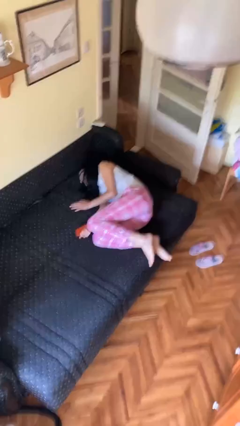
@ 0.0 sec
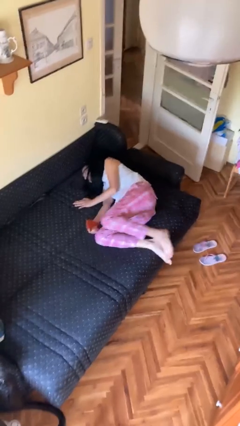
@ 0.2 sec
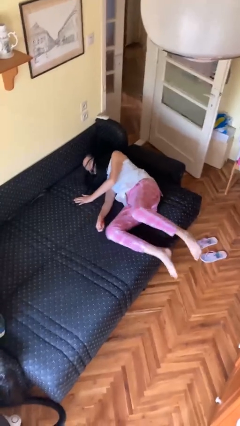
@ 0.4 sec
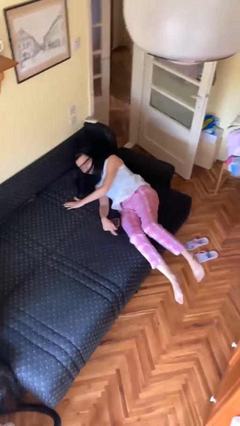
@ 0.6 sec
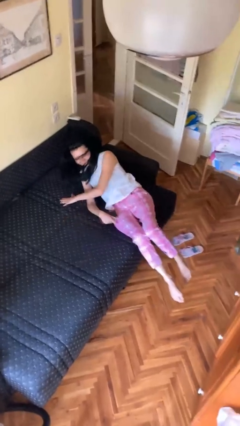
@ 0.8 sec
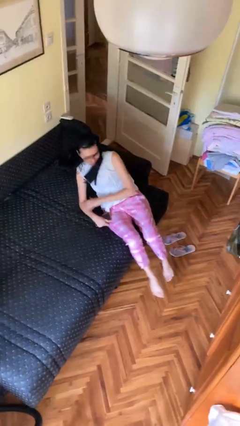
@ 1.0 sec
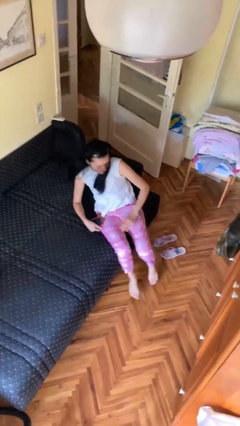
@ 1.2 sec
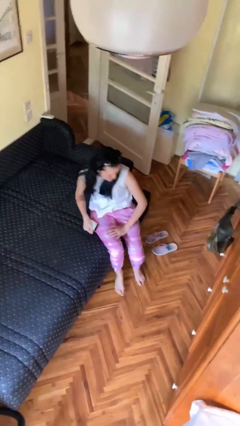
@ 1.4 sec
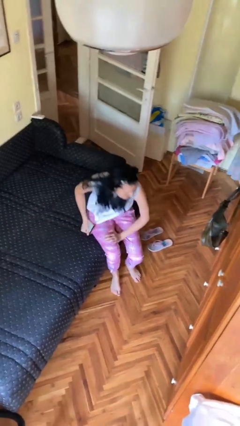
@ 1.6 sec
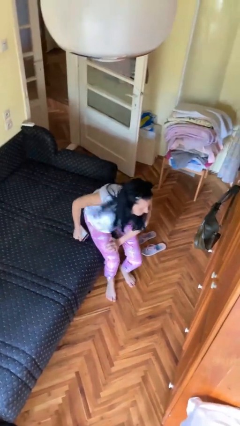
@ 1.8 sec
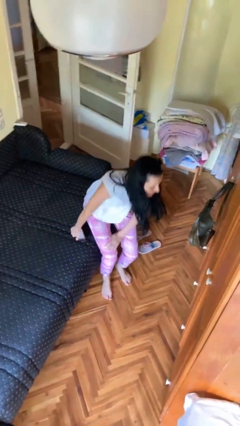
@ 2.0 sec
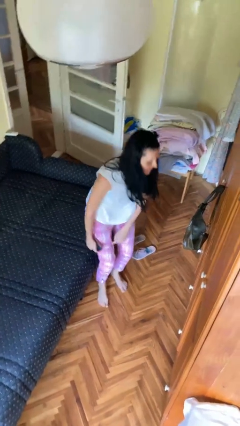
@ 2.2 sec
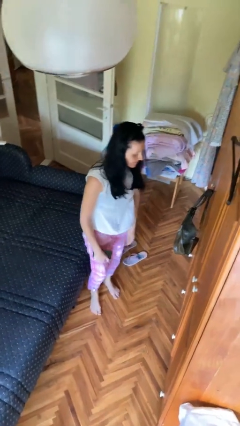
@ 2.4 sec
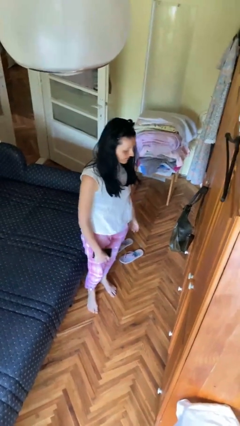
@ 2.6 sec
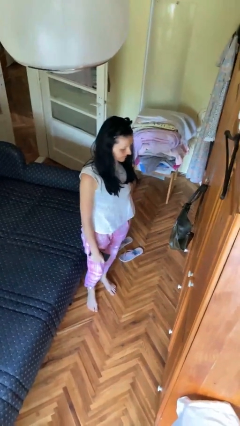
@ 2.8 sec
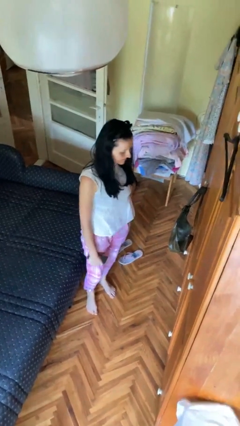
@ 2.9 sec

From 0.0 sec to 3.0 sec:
person stands up

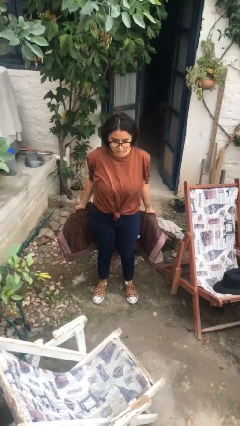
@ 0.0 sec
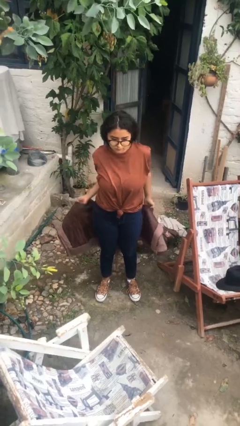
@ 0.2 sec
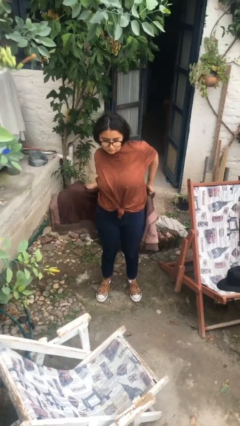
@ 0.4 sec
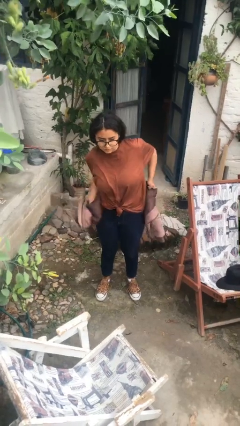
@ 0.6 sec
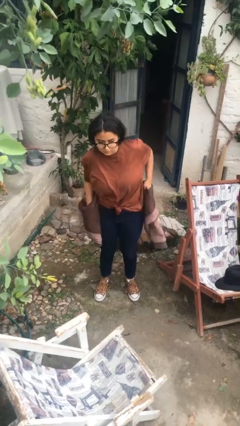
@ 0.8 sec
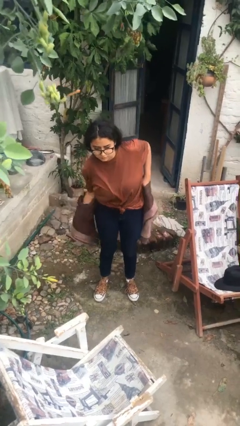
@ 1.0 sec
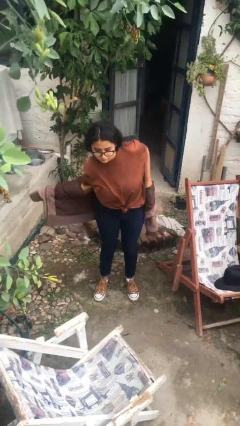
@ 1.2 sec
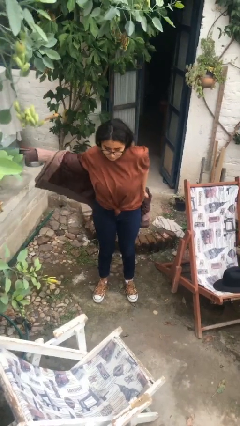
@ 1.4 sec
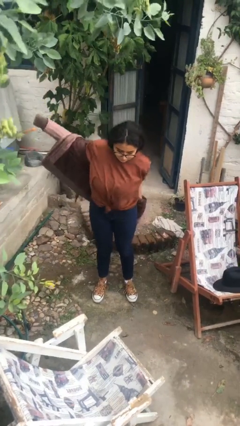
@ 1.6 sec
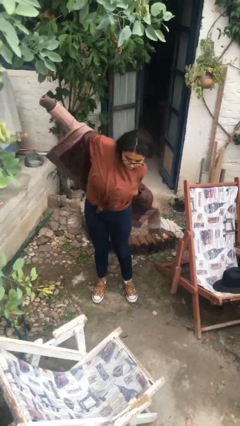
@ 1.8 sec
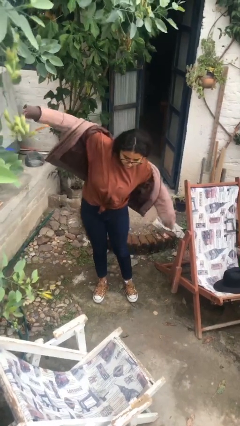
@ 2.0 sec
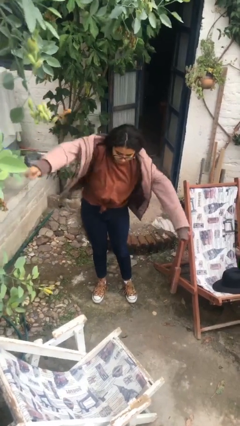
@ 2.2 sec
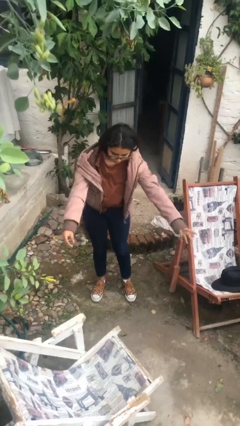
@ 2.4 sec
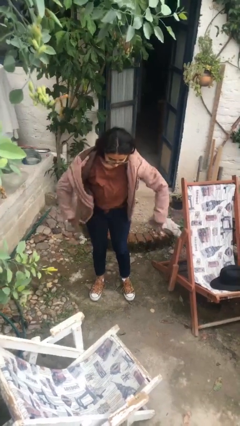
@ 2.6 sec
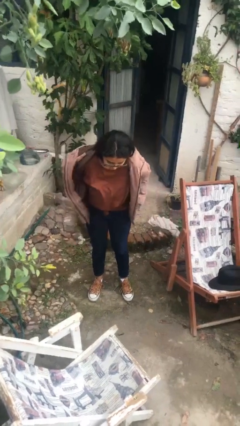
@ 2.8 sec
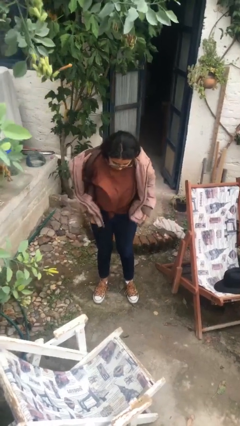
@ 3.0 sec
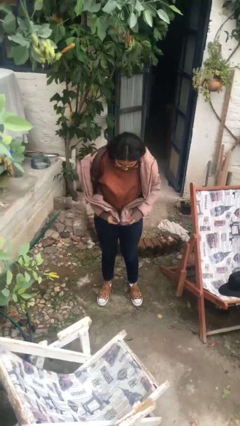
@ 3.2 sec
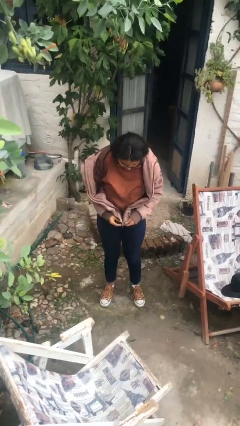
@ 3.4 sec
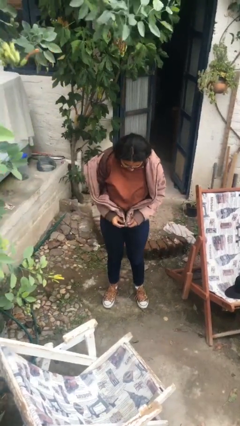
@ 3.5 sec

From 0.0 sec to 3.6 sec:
person puts on jacket

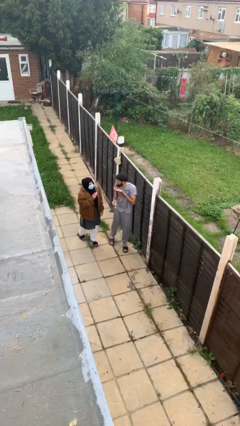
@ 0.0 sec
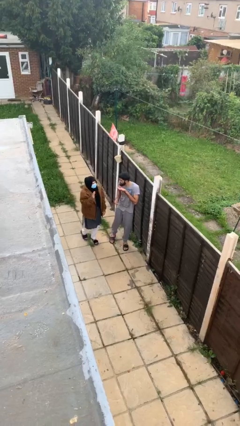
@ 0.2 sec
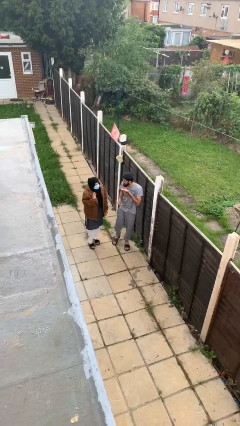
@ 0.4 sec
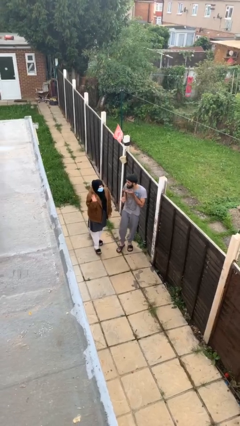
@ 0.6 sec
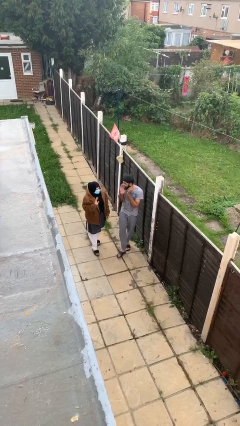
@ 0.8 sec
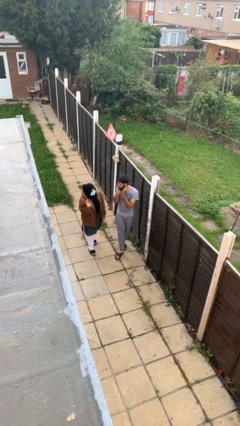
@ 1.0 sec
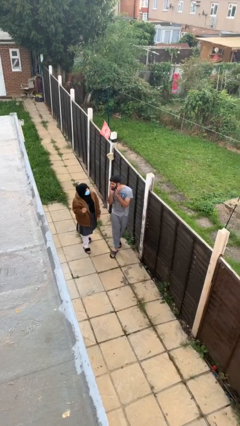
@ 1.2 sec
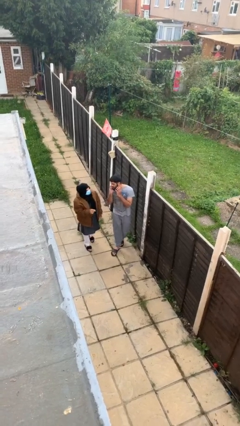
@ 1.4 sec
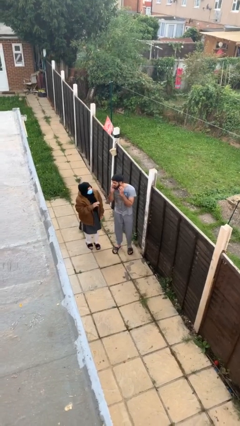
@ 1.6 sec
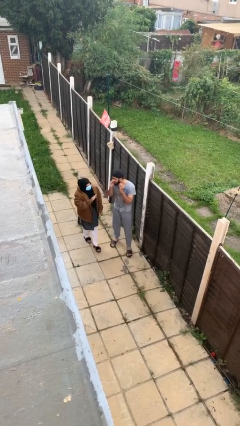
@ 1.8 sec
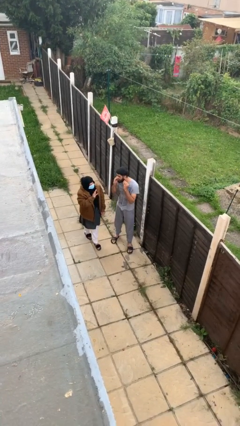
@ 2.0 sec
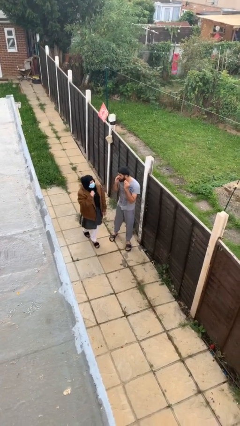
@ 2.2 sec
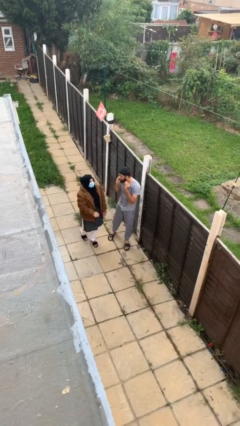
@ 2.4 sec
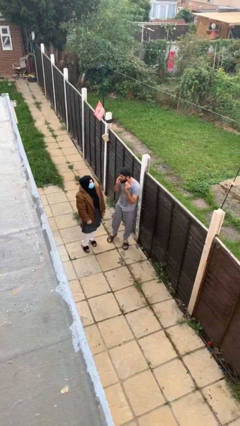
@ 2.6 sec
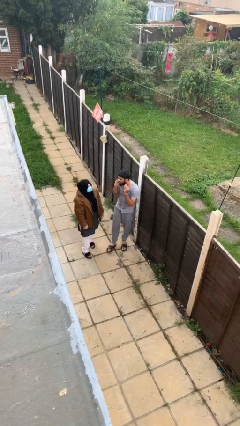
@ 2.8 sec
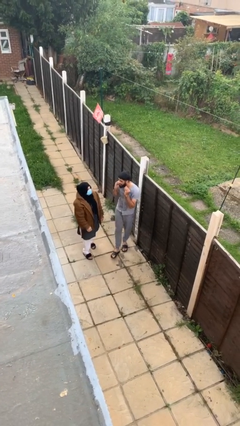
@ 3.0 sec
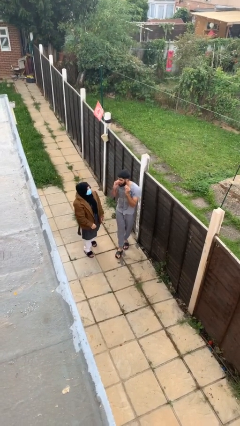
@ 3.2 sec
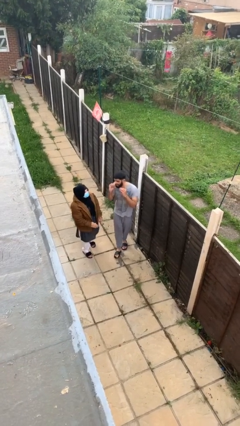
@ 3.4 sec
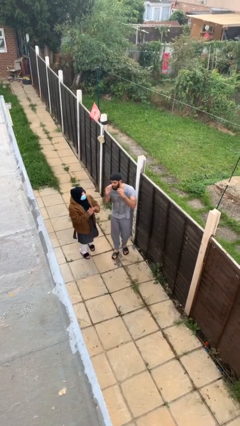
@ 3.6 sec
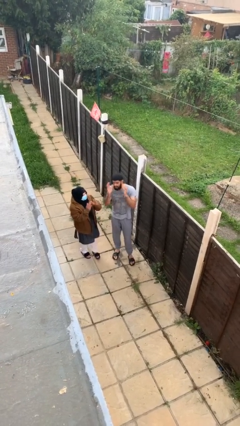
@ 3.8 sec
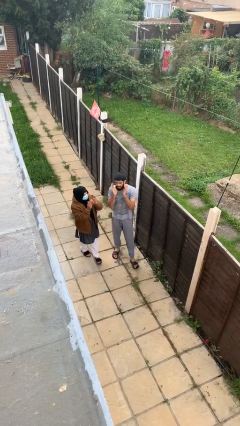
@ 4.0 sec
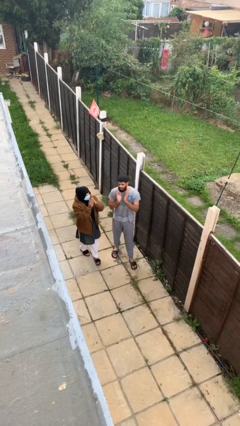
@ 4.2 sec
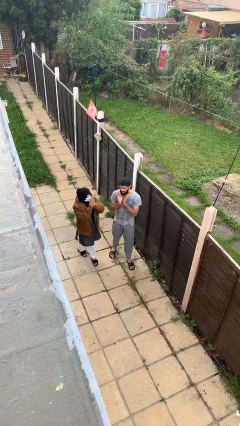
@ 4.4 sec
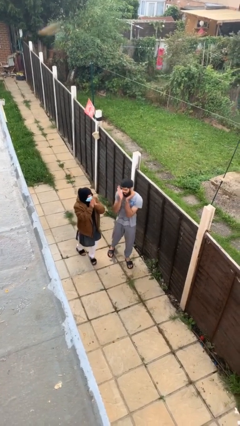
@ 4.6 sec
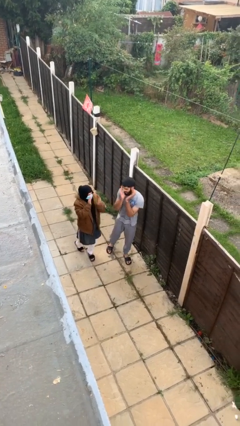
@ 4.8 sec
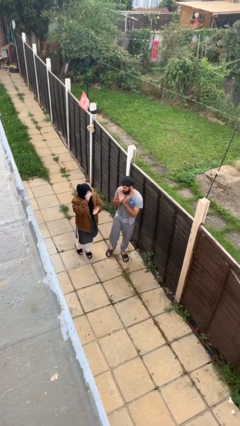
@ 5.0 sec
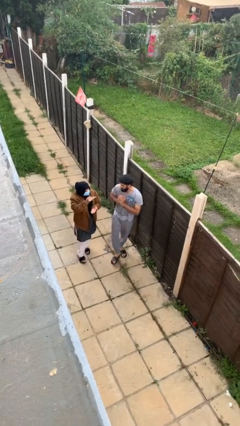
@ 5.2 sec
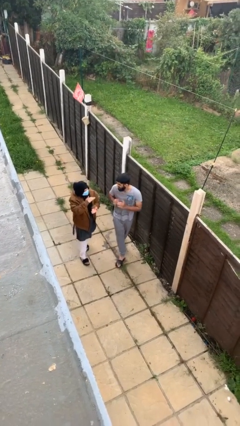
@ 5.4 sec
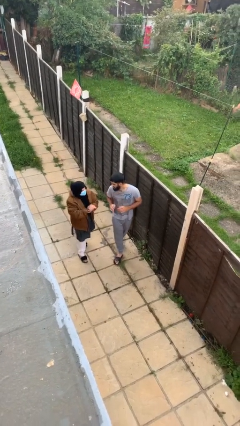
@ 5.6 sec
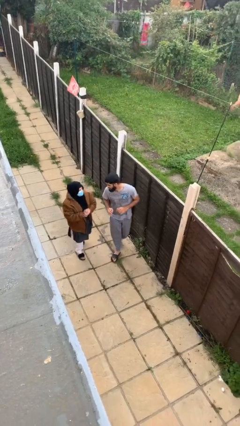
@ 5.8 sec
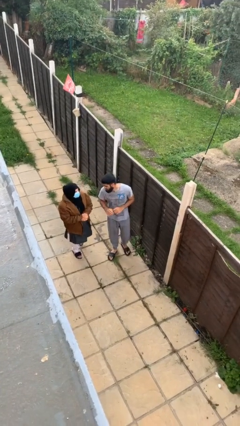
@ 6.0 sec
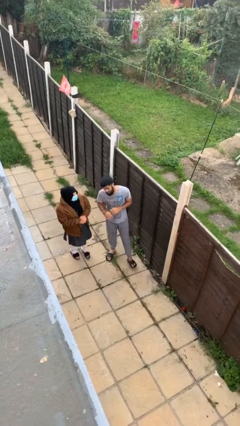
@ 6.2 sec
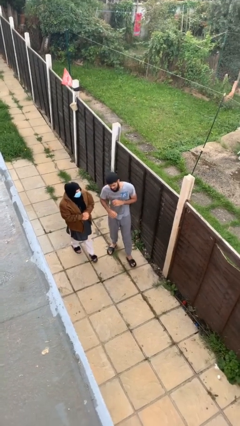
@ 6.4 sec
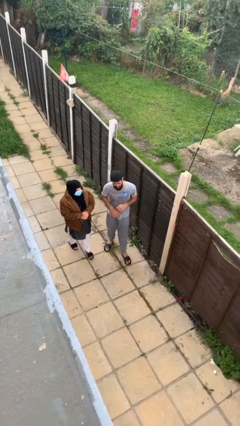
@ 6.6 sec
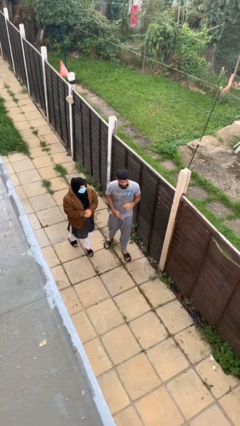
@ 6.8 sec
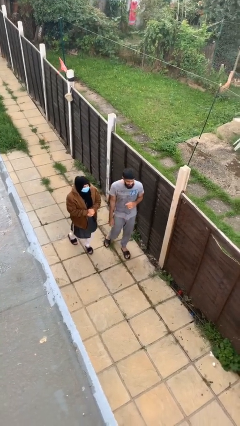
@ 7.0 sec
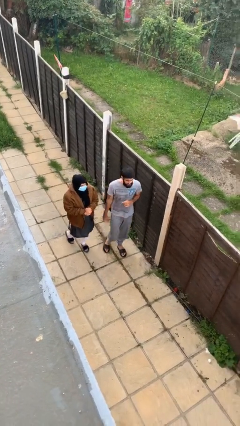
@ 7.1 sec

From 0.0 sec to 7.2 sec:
person talks to person

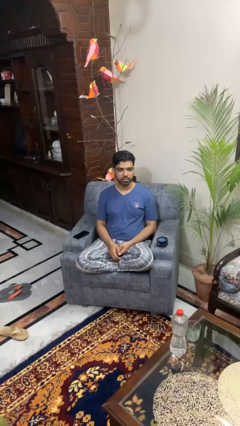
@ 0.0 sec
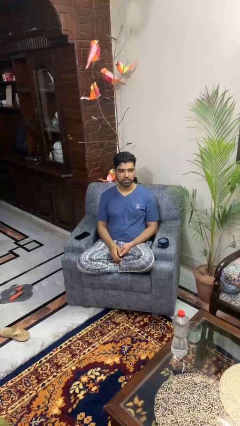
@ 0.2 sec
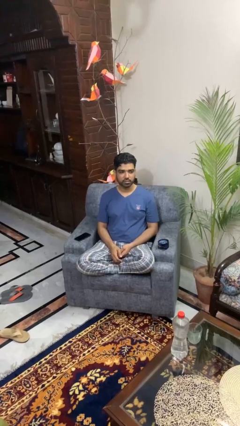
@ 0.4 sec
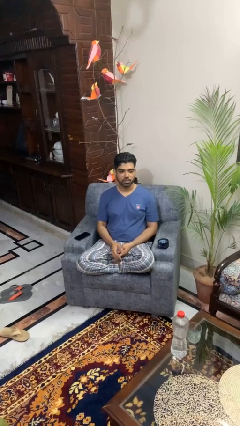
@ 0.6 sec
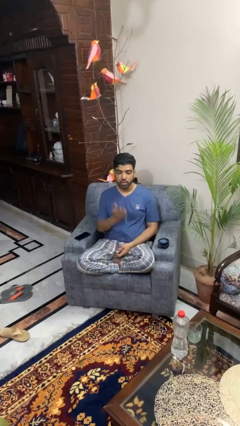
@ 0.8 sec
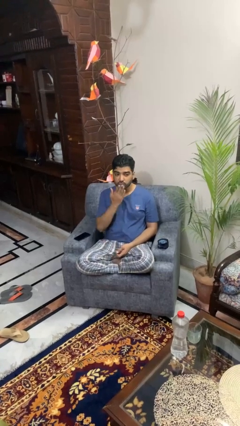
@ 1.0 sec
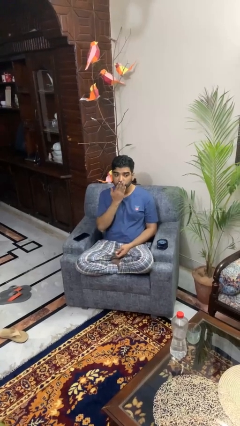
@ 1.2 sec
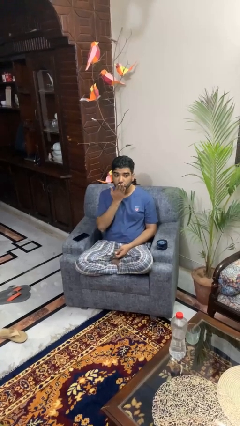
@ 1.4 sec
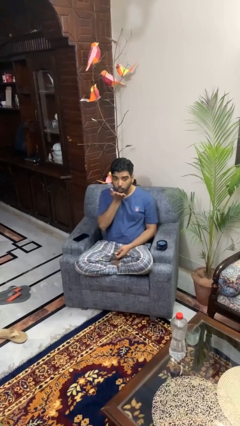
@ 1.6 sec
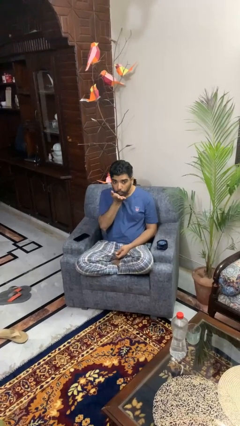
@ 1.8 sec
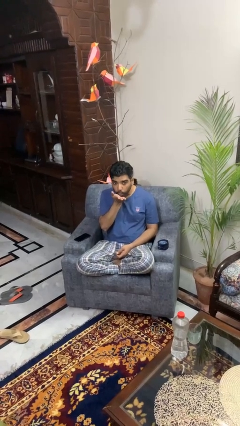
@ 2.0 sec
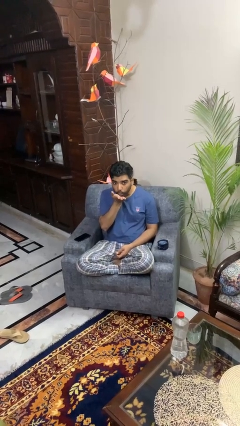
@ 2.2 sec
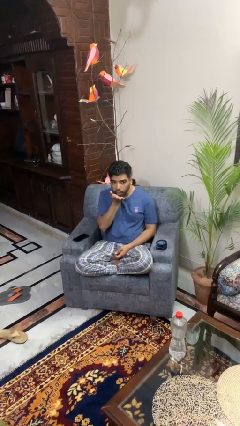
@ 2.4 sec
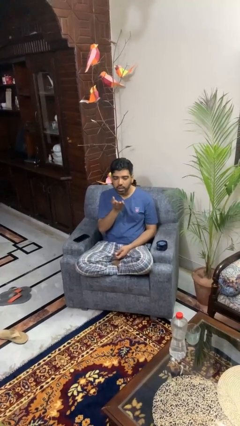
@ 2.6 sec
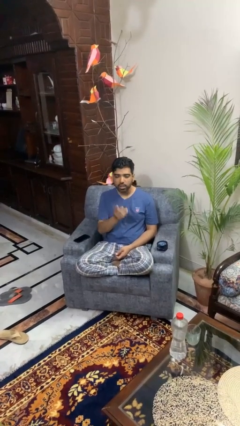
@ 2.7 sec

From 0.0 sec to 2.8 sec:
person gestures blow kiss

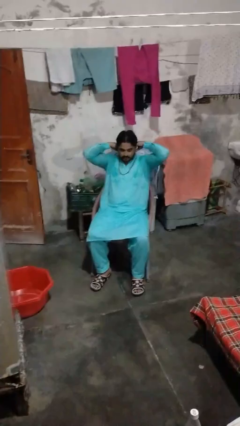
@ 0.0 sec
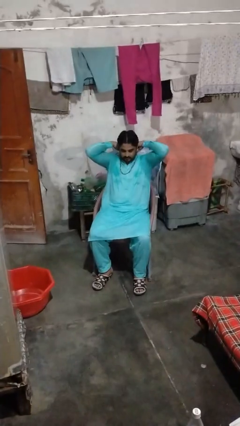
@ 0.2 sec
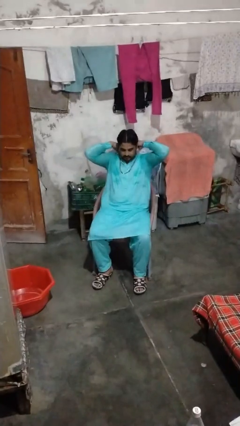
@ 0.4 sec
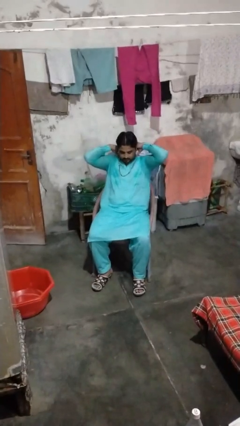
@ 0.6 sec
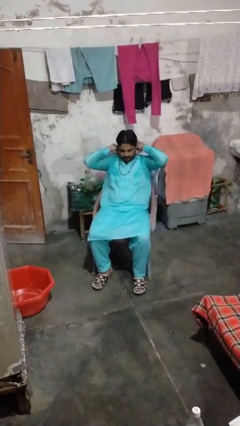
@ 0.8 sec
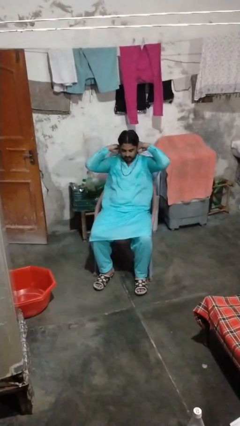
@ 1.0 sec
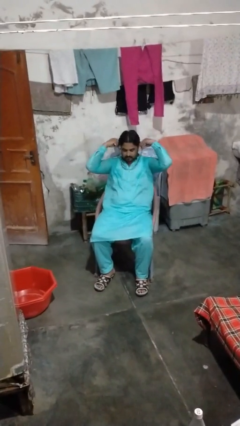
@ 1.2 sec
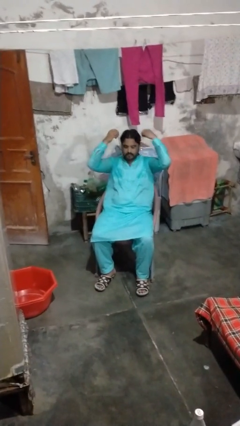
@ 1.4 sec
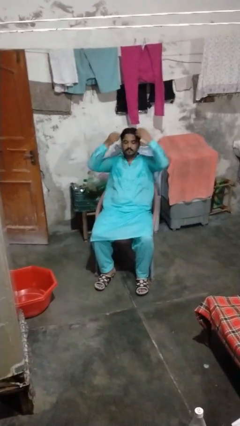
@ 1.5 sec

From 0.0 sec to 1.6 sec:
person takes off necklace
